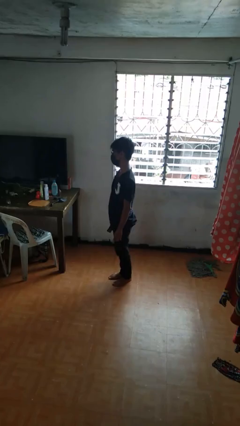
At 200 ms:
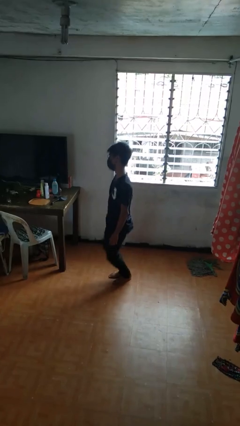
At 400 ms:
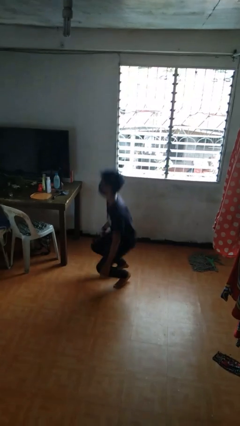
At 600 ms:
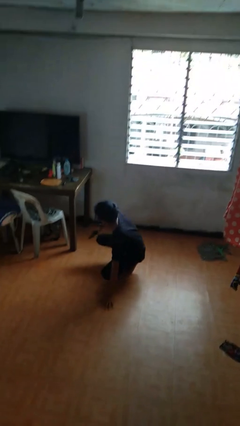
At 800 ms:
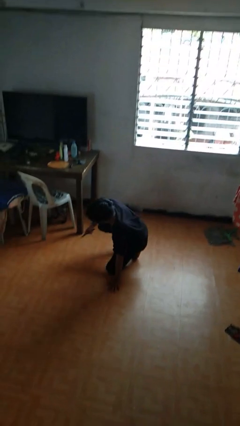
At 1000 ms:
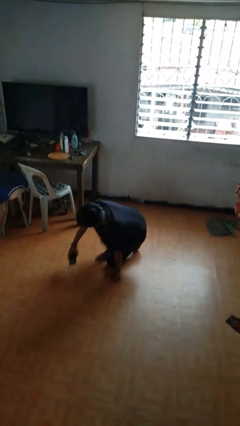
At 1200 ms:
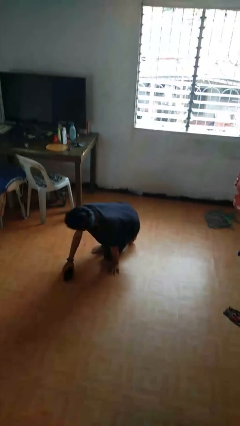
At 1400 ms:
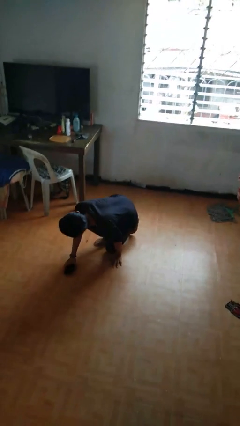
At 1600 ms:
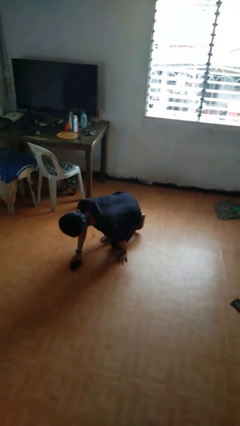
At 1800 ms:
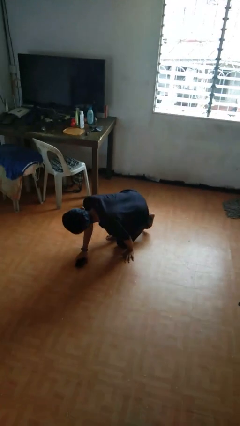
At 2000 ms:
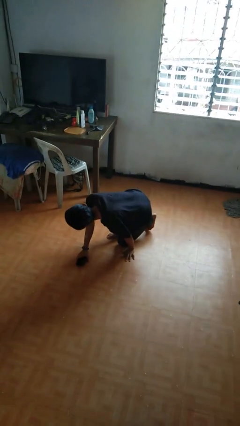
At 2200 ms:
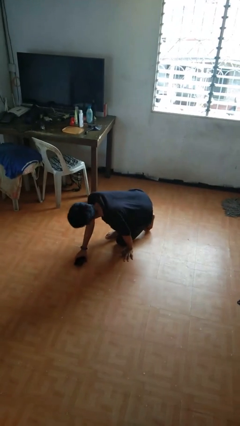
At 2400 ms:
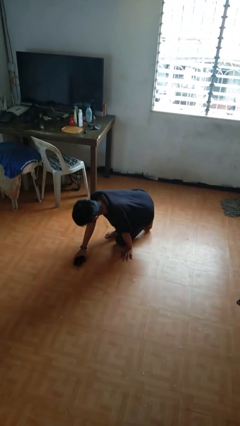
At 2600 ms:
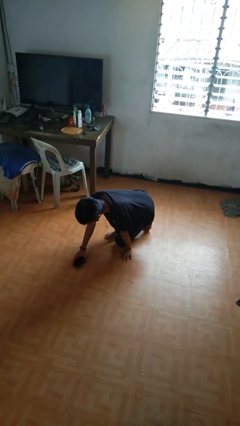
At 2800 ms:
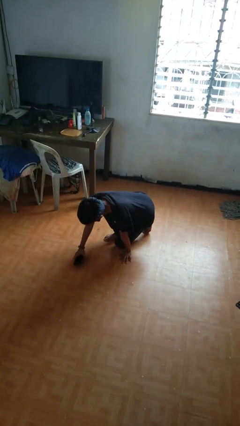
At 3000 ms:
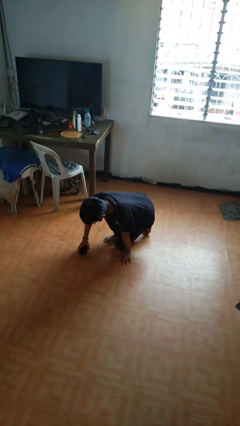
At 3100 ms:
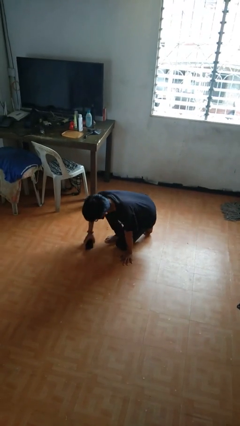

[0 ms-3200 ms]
person falls while standing

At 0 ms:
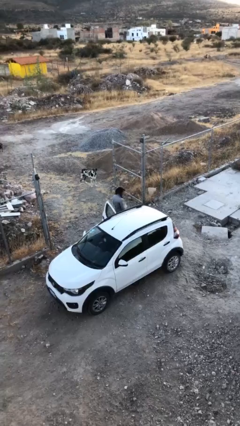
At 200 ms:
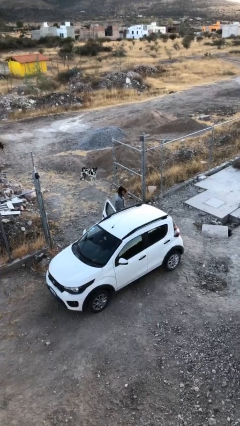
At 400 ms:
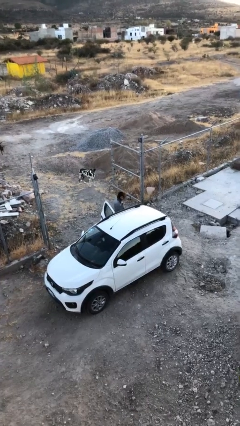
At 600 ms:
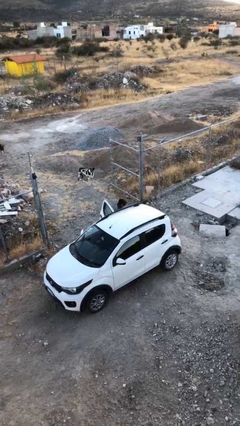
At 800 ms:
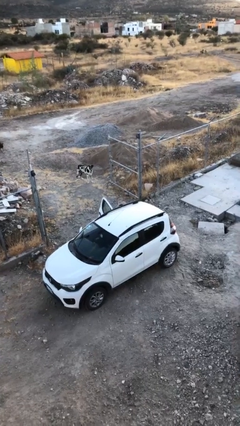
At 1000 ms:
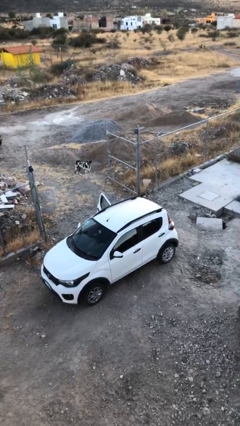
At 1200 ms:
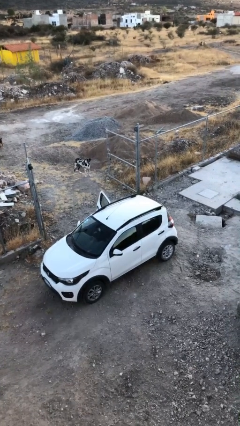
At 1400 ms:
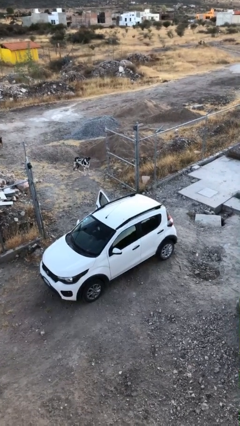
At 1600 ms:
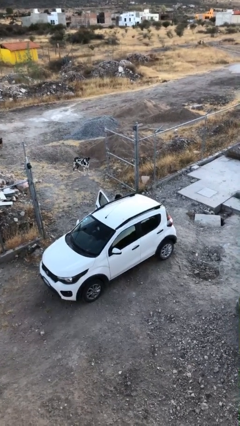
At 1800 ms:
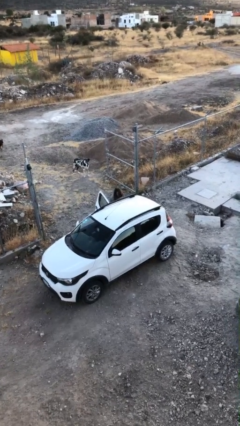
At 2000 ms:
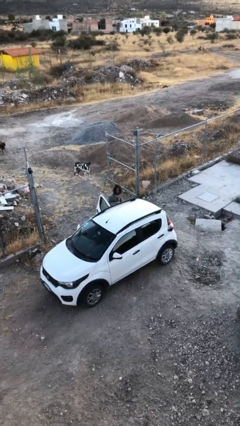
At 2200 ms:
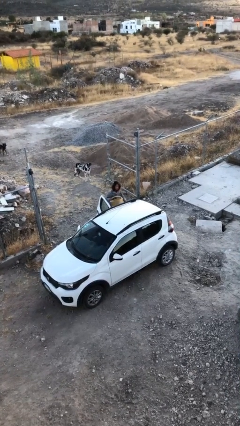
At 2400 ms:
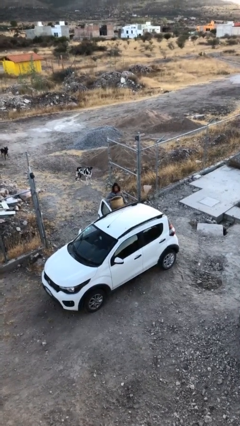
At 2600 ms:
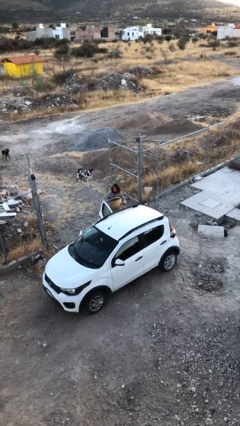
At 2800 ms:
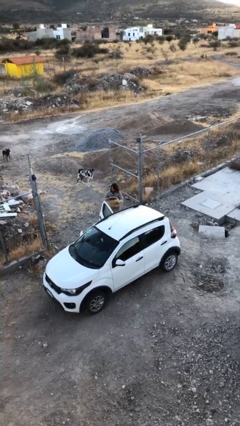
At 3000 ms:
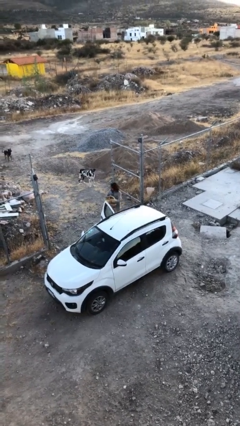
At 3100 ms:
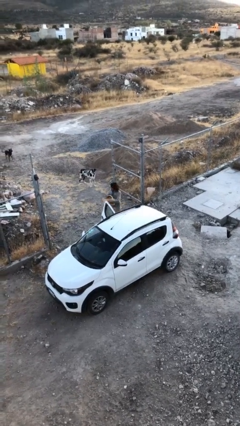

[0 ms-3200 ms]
person unloads car

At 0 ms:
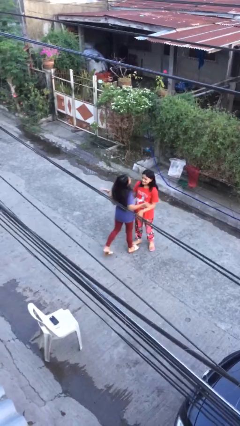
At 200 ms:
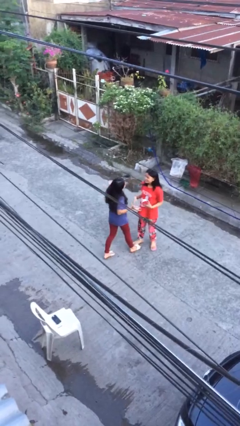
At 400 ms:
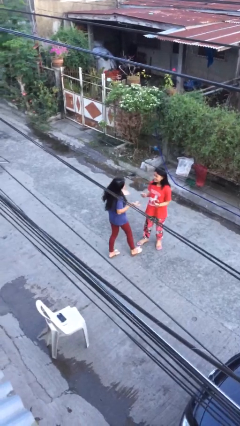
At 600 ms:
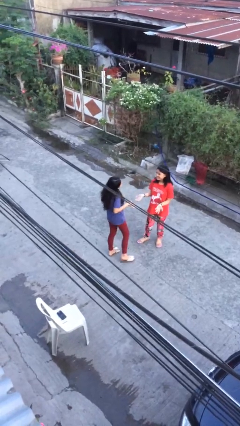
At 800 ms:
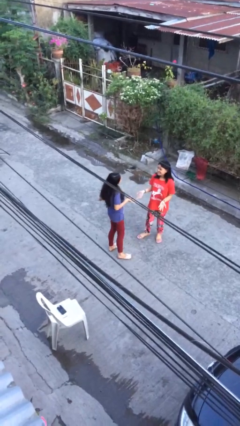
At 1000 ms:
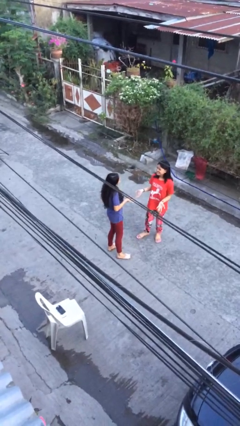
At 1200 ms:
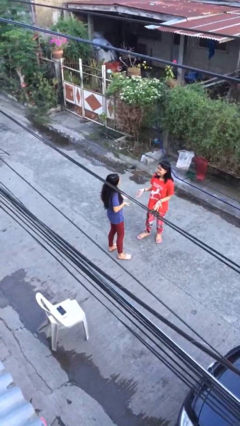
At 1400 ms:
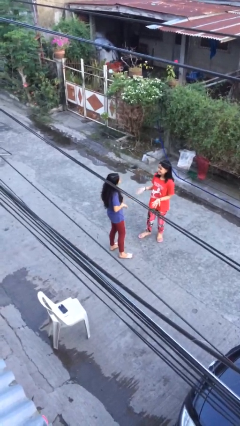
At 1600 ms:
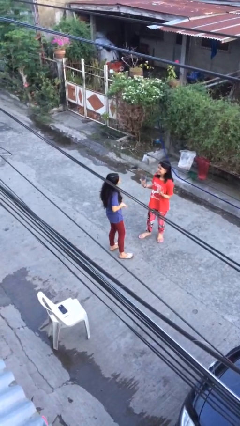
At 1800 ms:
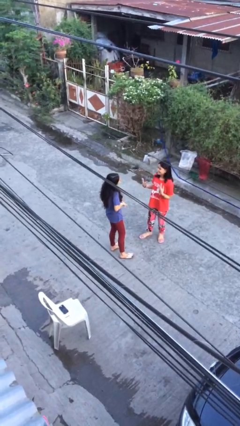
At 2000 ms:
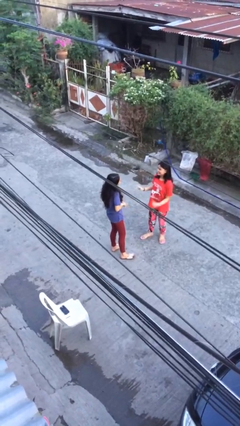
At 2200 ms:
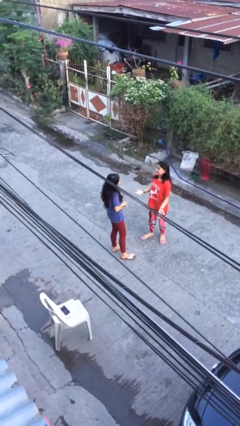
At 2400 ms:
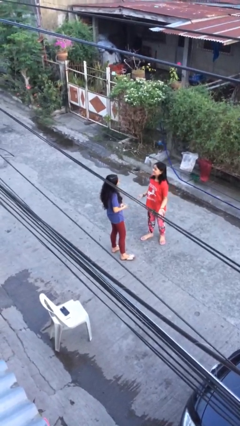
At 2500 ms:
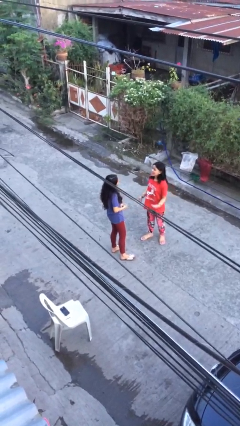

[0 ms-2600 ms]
person talks to person

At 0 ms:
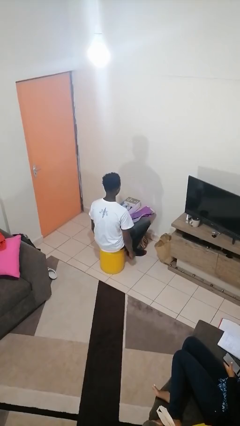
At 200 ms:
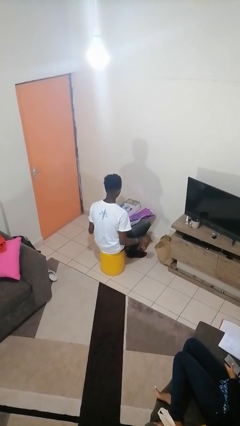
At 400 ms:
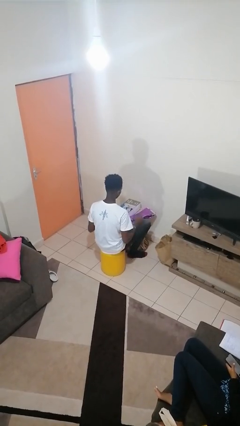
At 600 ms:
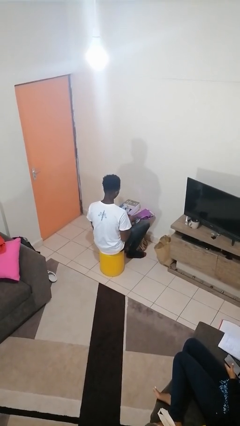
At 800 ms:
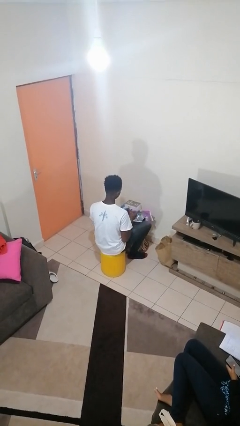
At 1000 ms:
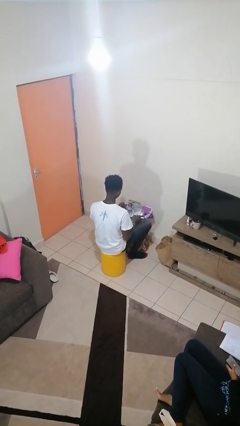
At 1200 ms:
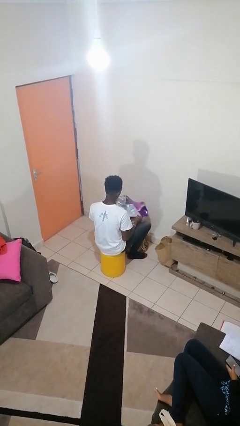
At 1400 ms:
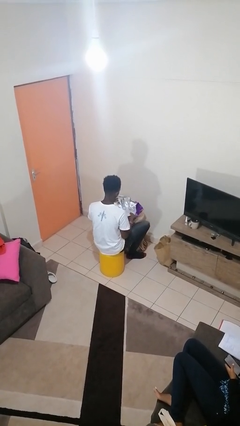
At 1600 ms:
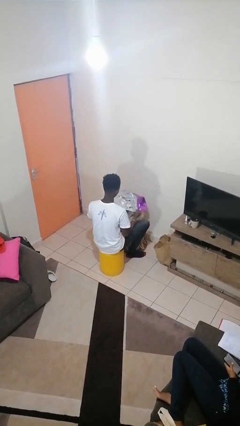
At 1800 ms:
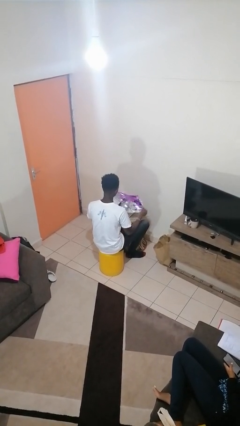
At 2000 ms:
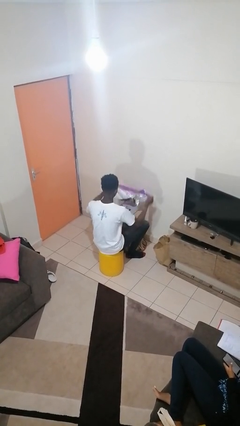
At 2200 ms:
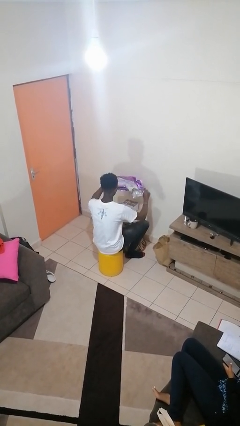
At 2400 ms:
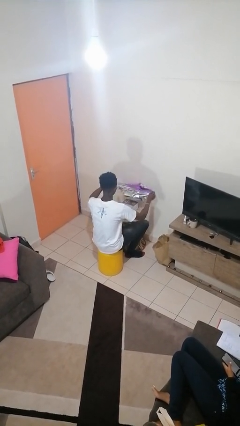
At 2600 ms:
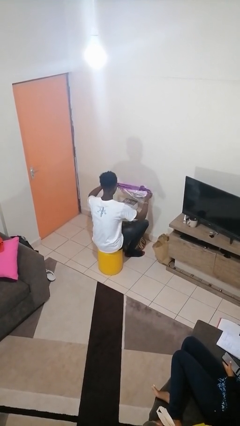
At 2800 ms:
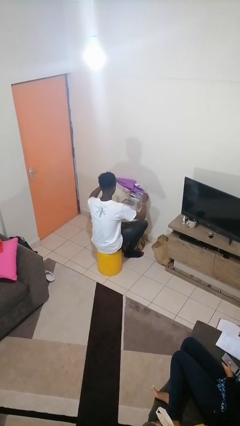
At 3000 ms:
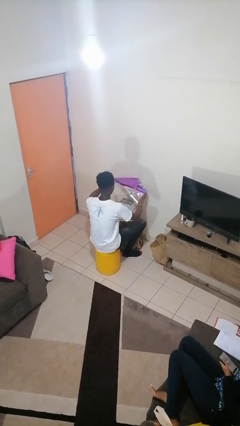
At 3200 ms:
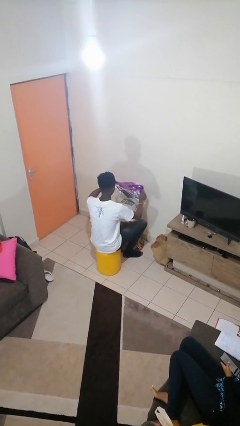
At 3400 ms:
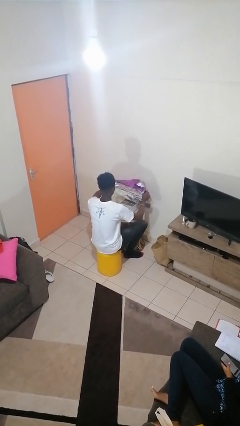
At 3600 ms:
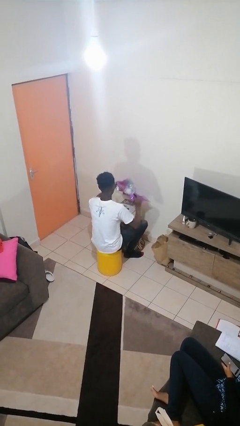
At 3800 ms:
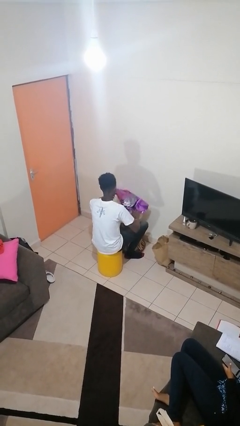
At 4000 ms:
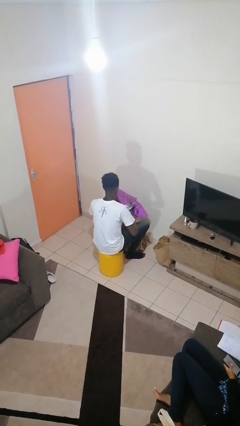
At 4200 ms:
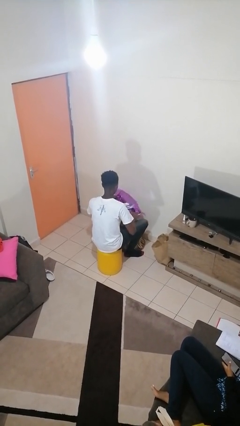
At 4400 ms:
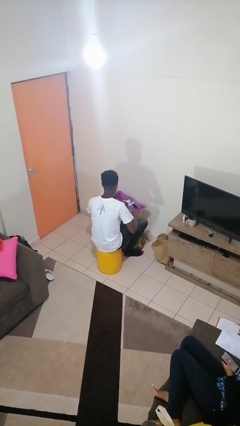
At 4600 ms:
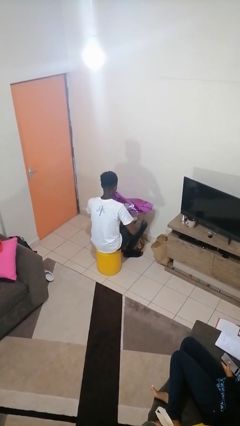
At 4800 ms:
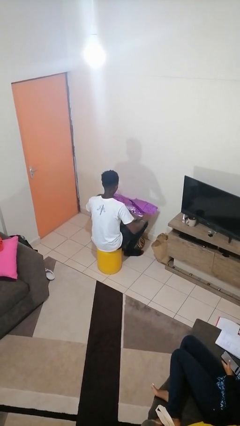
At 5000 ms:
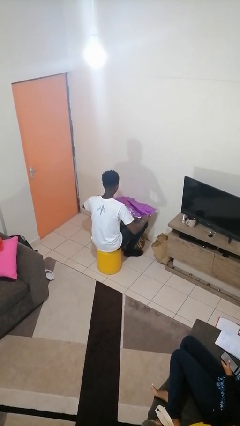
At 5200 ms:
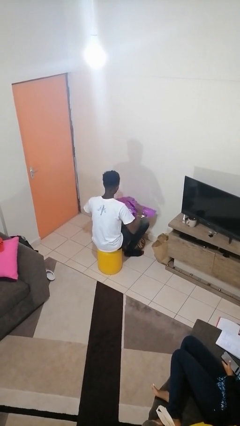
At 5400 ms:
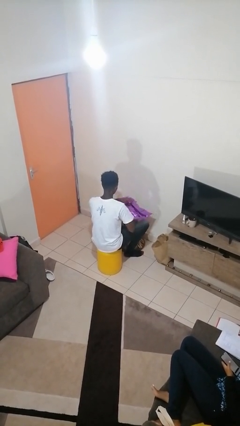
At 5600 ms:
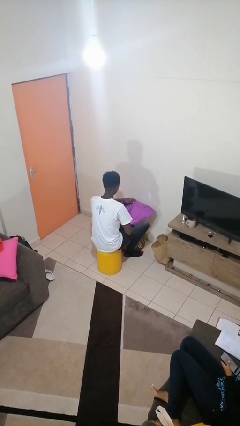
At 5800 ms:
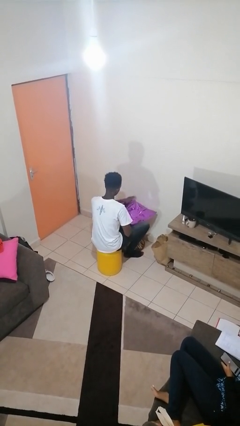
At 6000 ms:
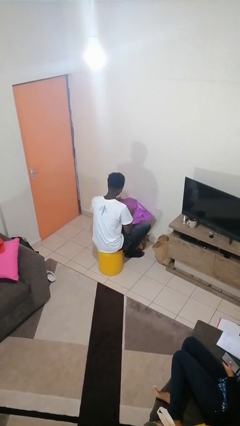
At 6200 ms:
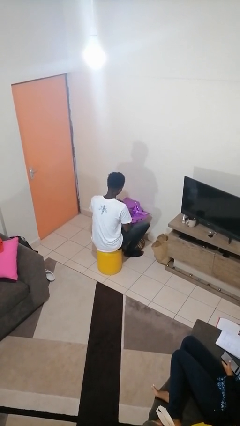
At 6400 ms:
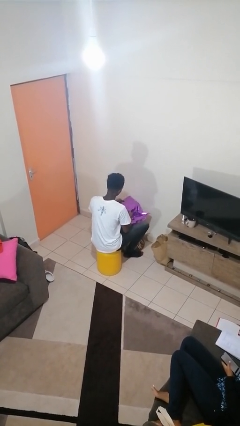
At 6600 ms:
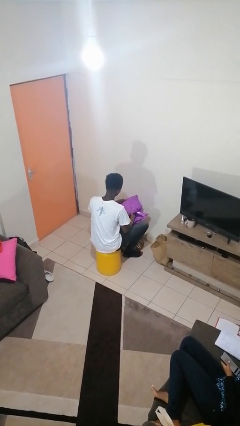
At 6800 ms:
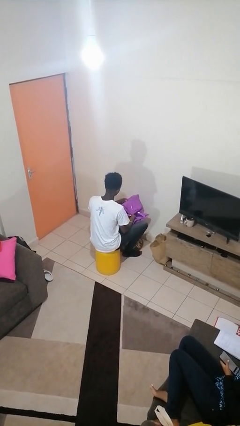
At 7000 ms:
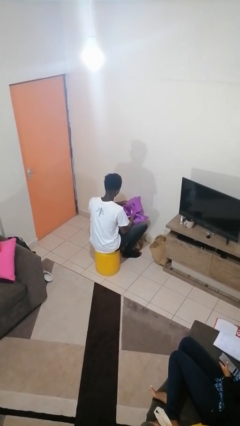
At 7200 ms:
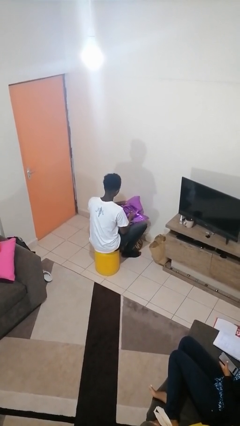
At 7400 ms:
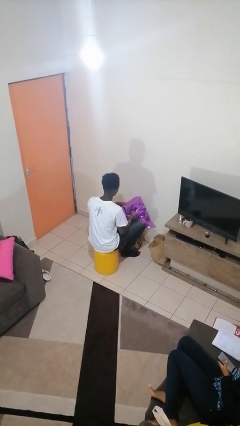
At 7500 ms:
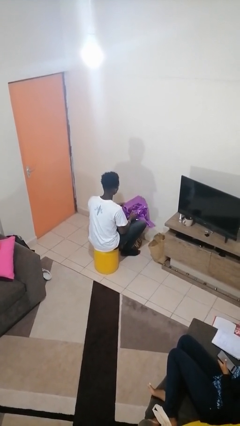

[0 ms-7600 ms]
person wraps box

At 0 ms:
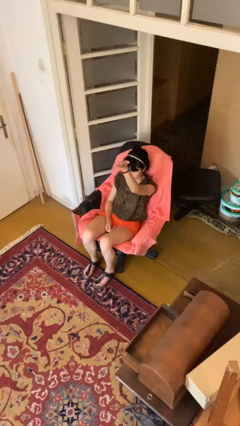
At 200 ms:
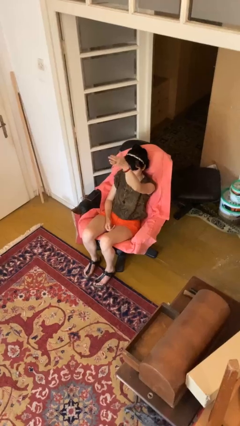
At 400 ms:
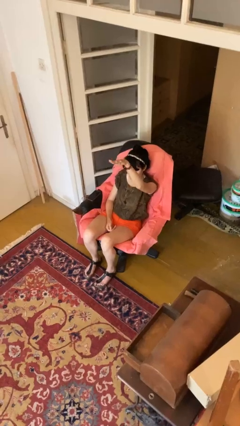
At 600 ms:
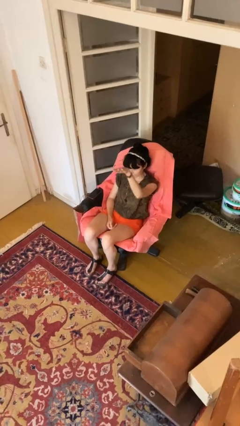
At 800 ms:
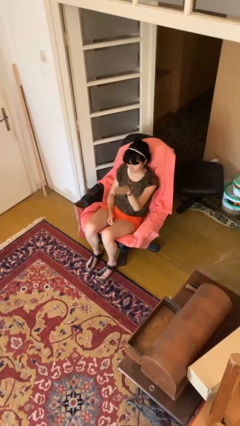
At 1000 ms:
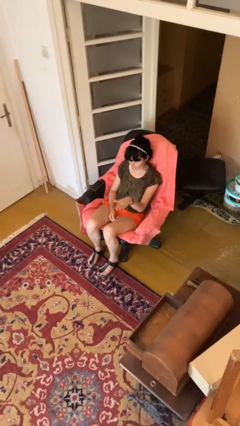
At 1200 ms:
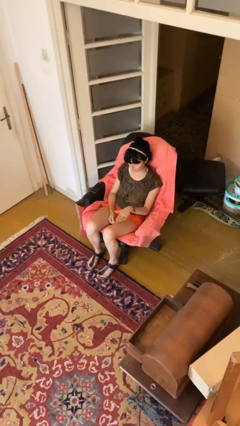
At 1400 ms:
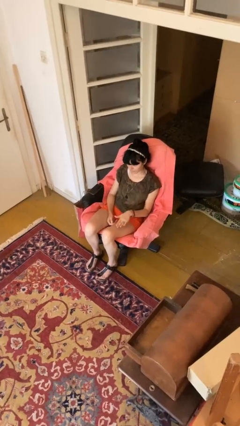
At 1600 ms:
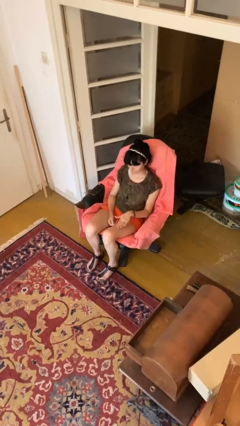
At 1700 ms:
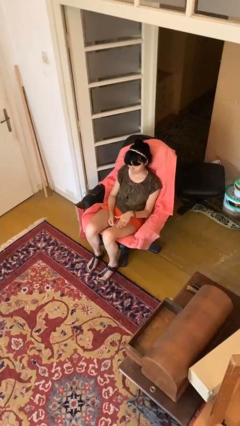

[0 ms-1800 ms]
person gestures swipe down
